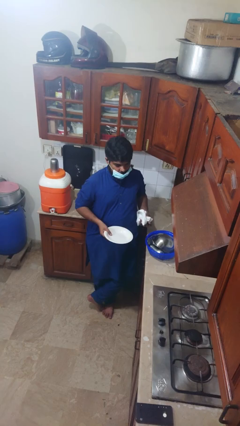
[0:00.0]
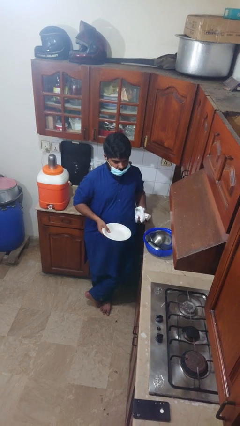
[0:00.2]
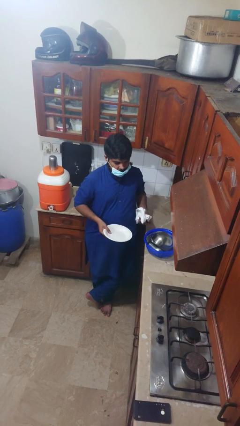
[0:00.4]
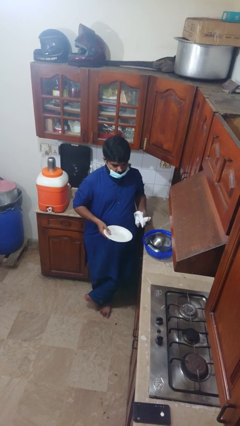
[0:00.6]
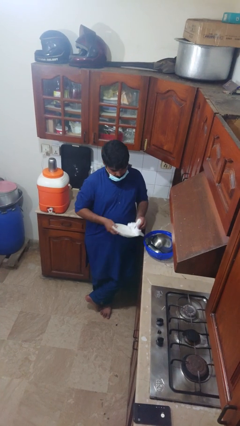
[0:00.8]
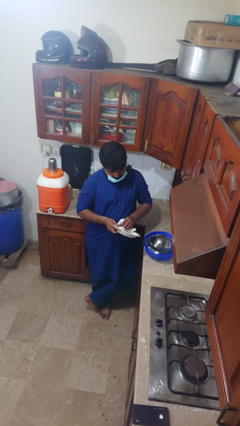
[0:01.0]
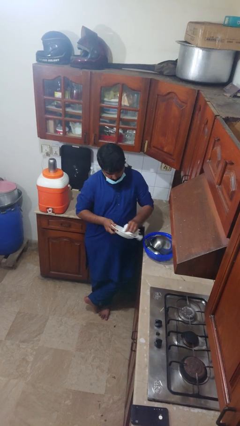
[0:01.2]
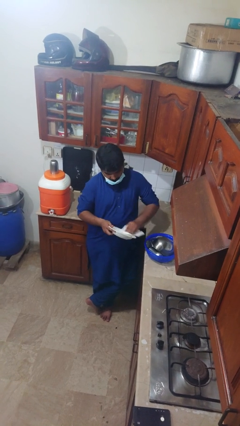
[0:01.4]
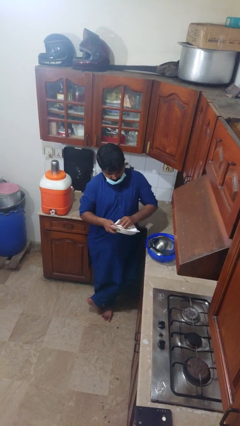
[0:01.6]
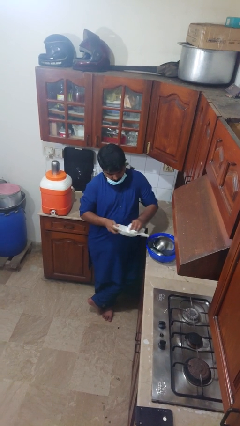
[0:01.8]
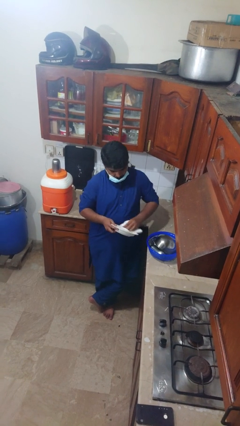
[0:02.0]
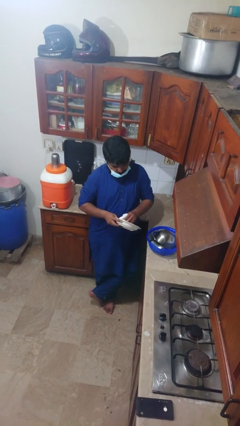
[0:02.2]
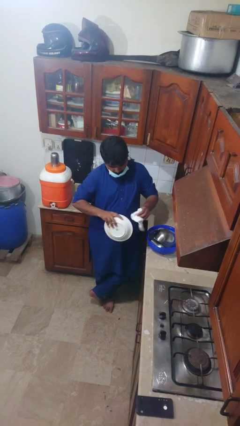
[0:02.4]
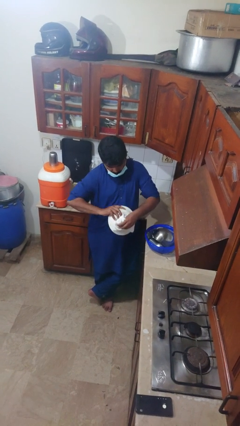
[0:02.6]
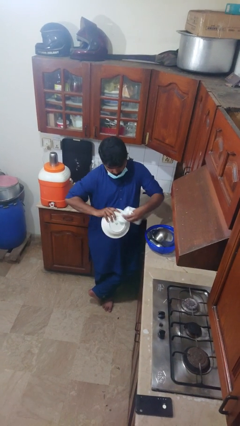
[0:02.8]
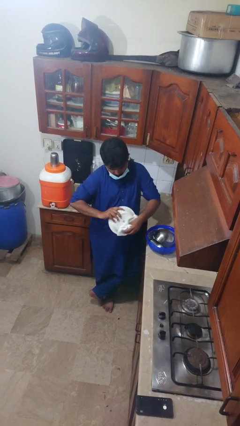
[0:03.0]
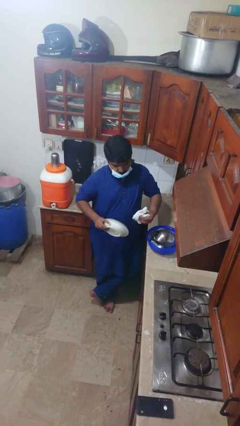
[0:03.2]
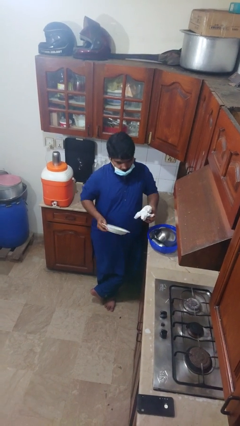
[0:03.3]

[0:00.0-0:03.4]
person dries dish

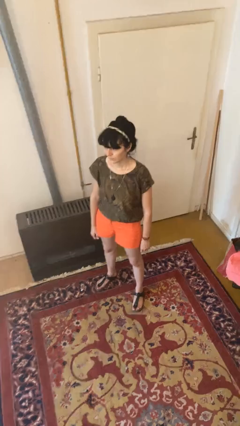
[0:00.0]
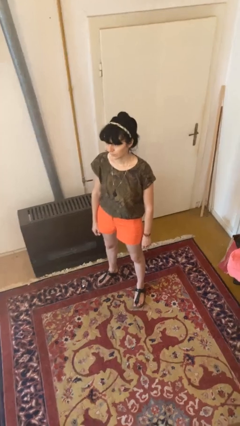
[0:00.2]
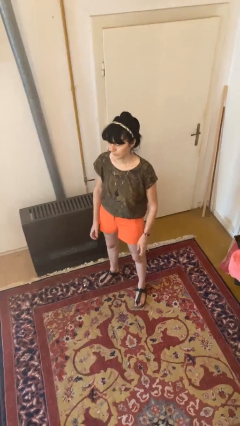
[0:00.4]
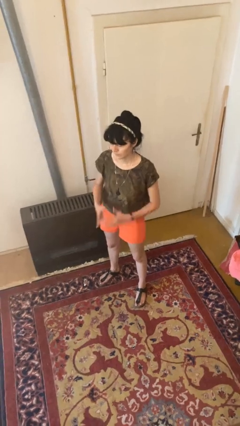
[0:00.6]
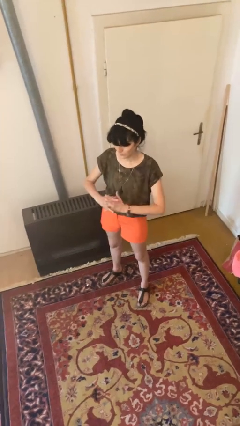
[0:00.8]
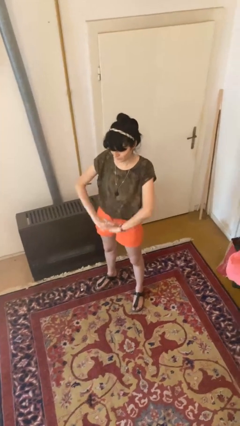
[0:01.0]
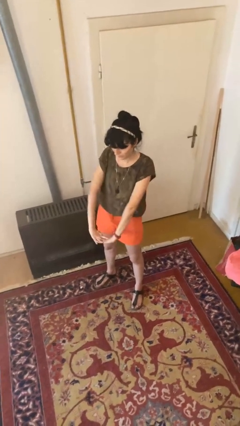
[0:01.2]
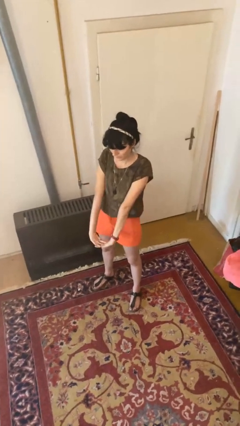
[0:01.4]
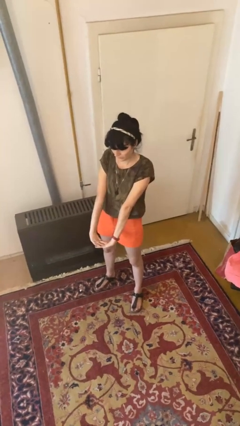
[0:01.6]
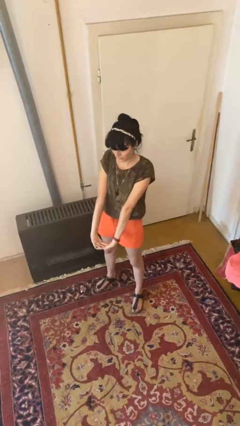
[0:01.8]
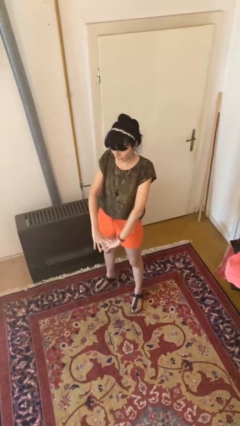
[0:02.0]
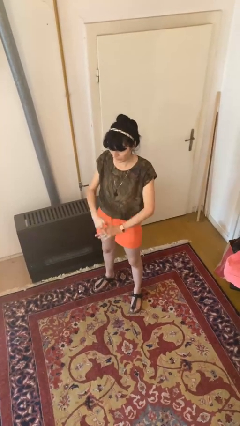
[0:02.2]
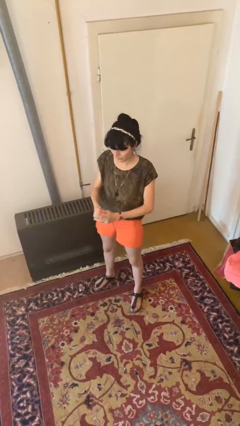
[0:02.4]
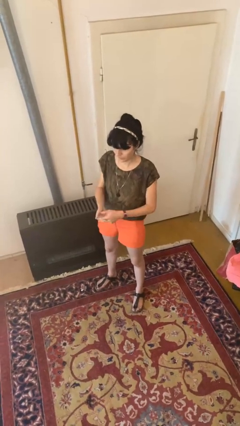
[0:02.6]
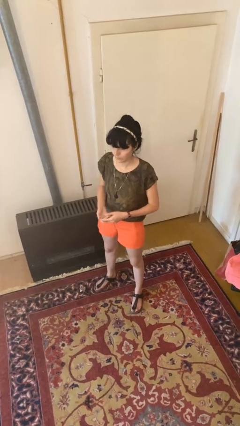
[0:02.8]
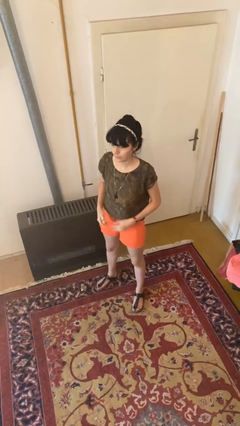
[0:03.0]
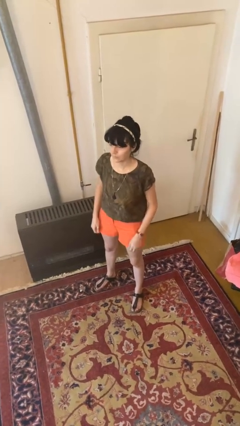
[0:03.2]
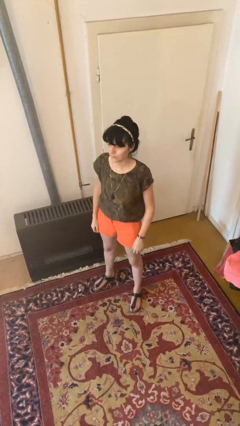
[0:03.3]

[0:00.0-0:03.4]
person cracks knuckles

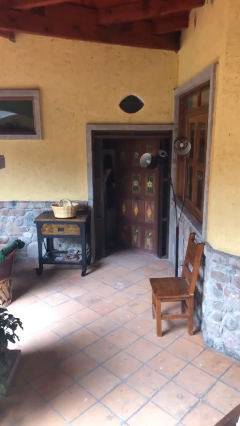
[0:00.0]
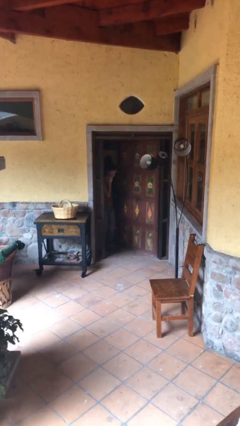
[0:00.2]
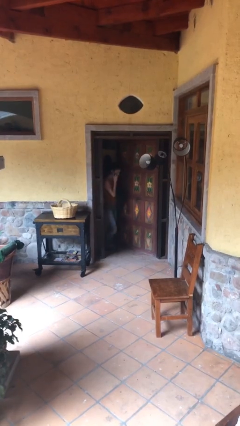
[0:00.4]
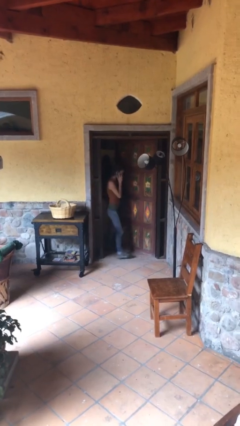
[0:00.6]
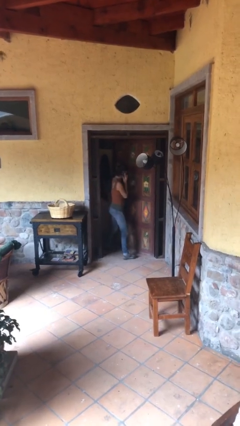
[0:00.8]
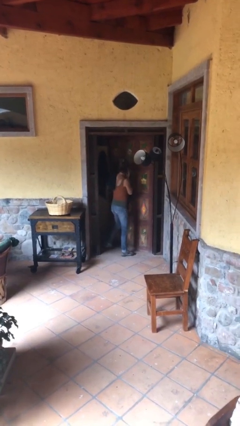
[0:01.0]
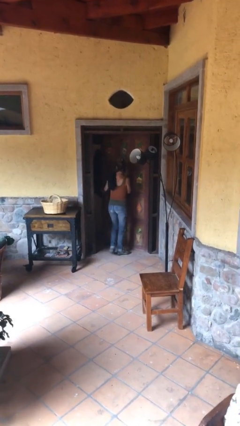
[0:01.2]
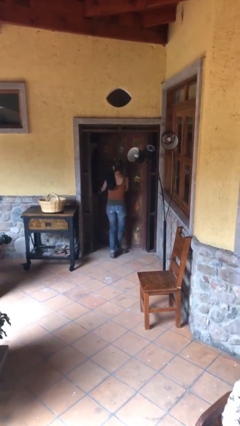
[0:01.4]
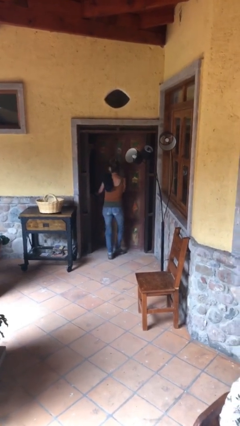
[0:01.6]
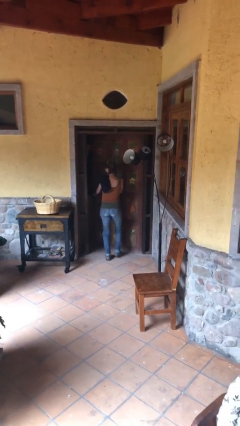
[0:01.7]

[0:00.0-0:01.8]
person enters scene through structure

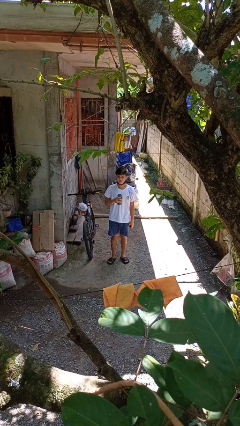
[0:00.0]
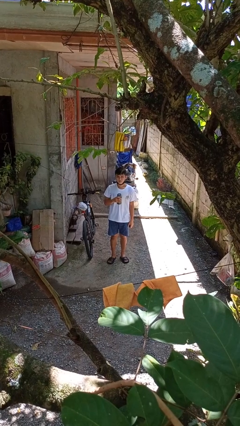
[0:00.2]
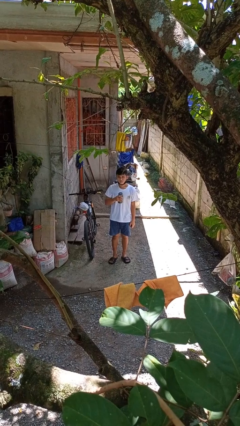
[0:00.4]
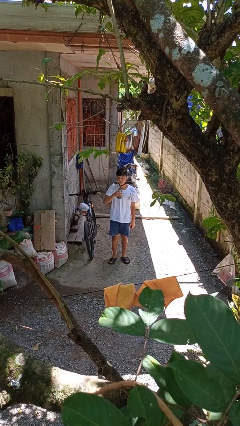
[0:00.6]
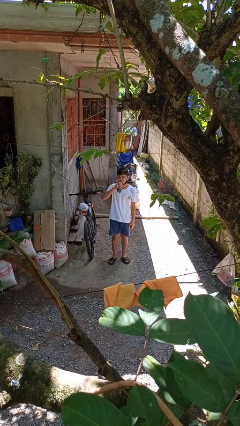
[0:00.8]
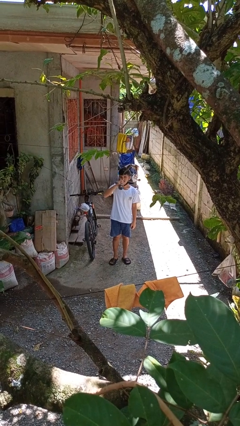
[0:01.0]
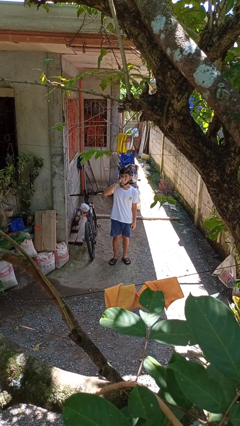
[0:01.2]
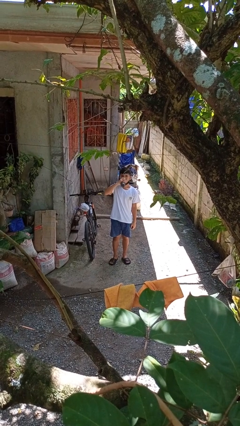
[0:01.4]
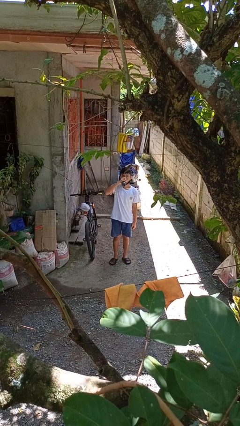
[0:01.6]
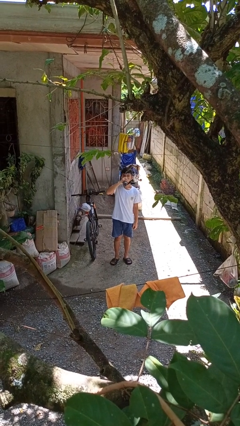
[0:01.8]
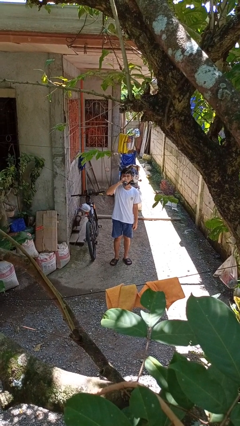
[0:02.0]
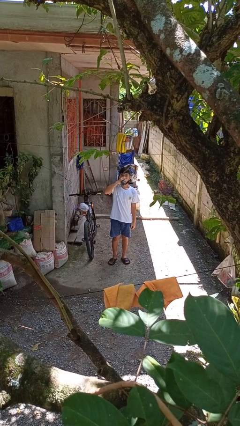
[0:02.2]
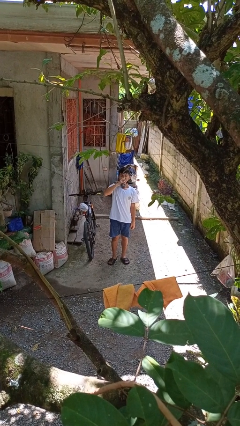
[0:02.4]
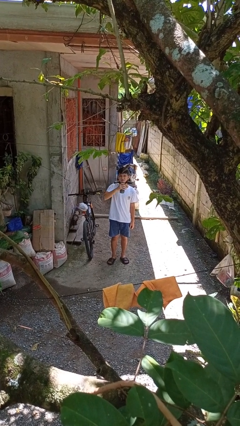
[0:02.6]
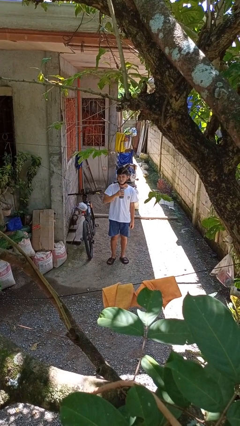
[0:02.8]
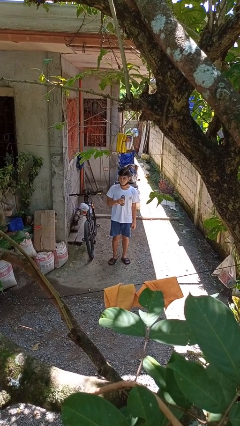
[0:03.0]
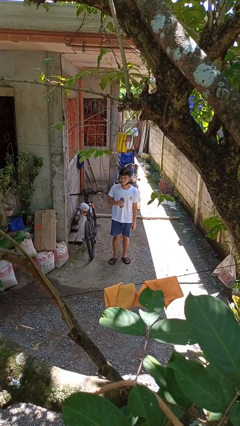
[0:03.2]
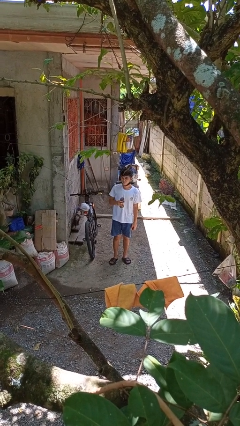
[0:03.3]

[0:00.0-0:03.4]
person drinks from bottle

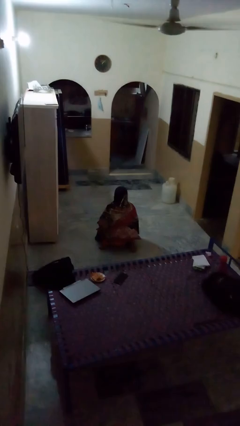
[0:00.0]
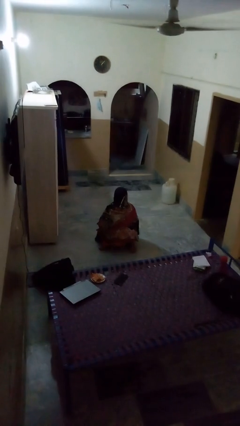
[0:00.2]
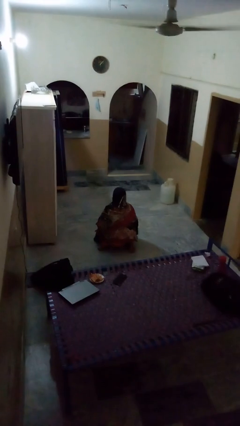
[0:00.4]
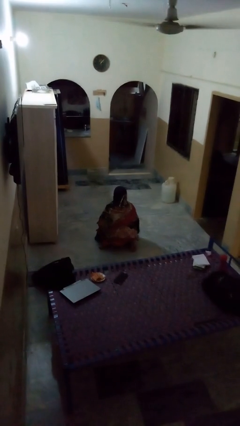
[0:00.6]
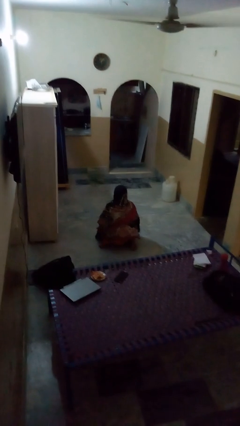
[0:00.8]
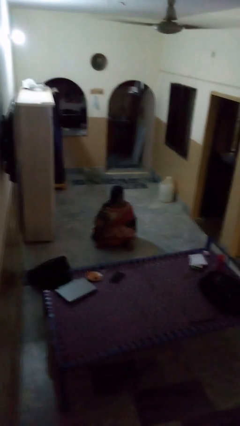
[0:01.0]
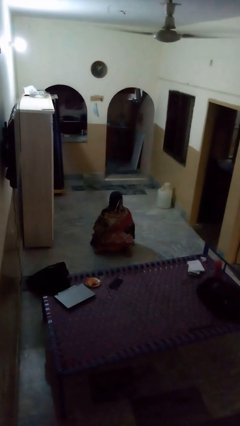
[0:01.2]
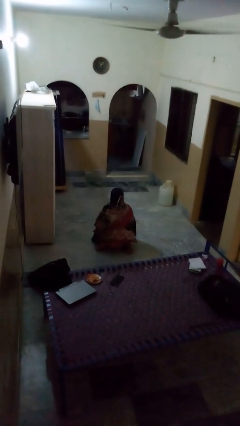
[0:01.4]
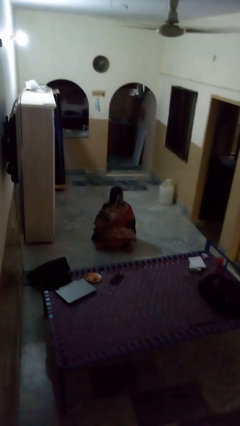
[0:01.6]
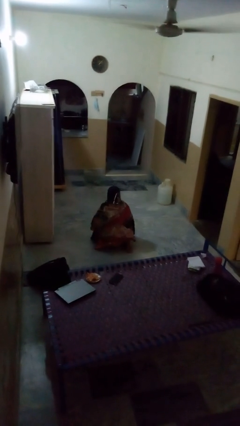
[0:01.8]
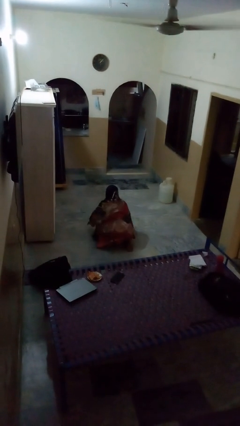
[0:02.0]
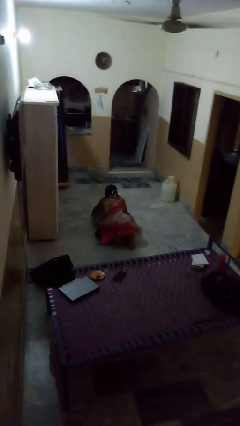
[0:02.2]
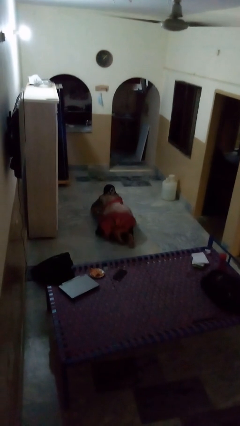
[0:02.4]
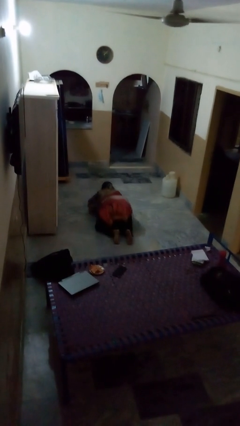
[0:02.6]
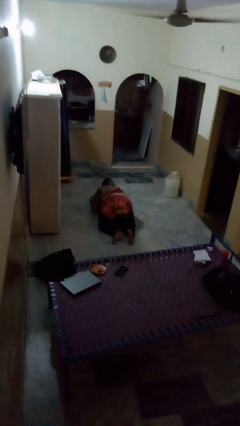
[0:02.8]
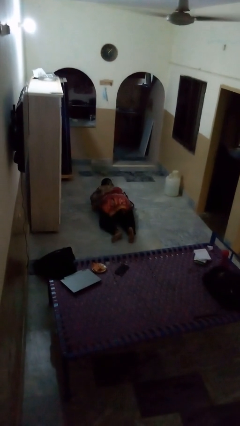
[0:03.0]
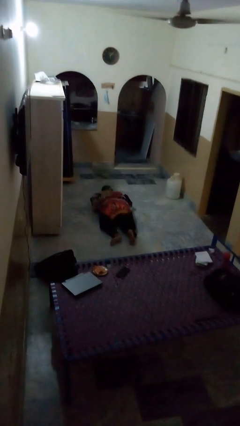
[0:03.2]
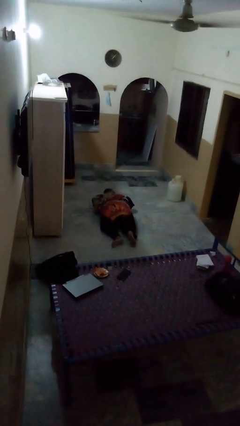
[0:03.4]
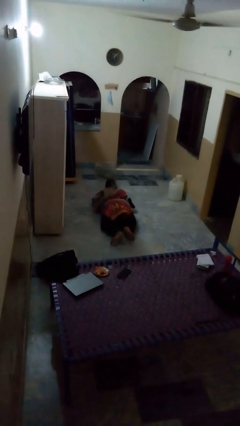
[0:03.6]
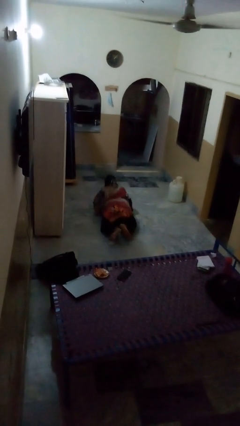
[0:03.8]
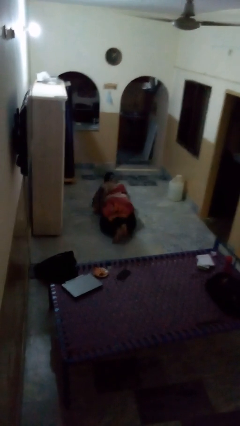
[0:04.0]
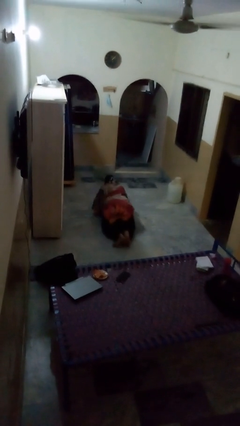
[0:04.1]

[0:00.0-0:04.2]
person exercises with pushup

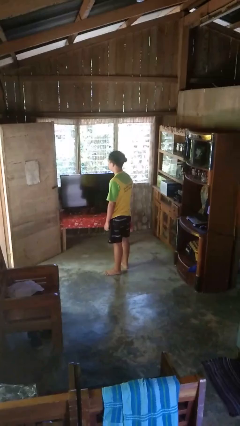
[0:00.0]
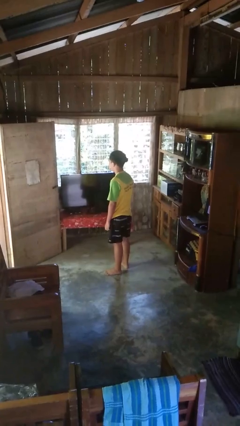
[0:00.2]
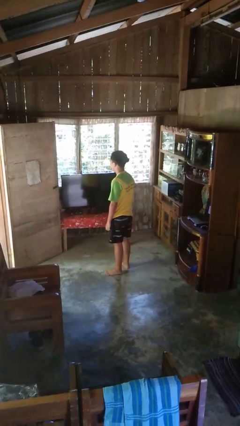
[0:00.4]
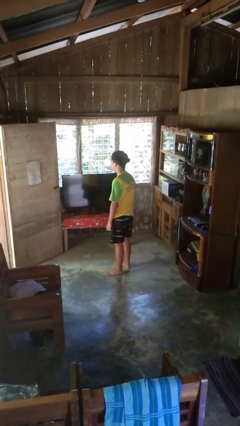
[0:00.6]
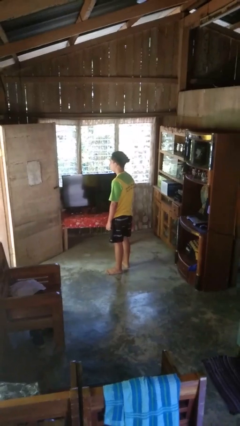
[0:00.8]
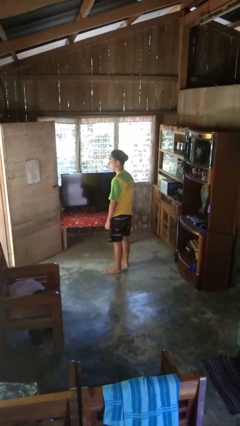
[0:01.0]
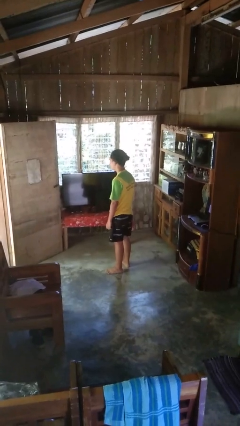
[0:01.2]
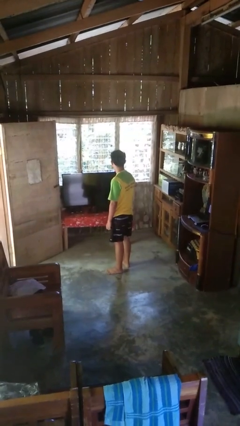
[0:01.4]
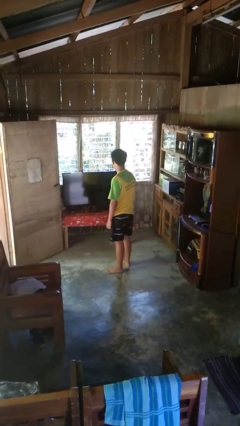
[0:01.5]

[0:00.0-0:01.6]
person shakes head
